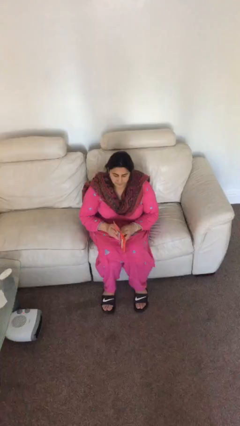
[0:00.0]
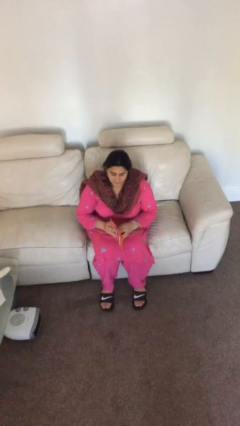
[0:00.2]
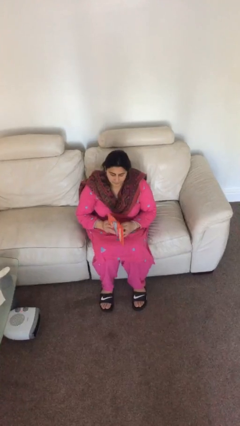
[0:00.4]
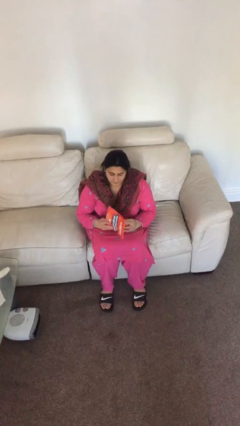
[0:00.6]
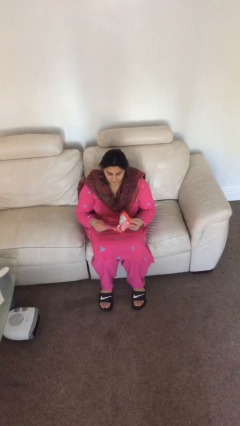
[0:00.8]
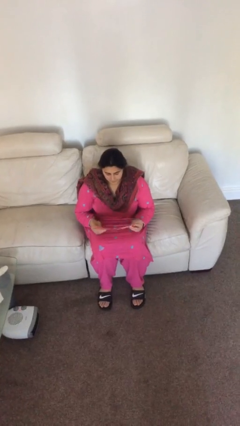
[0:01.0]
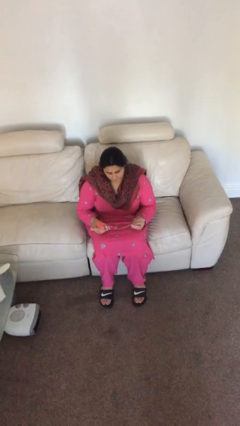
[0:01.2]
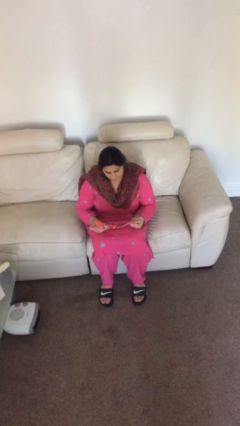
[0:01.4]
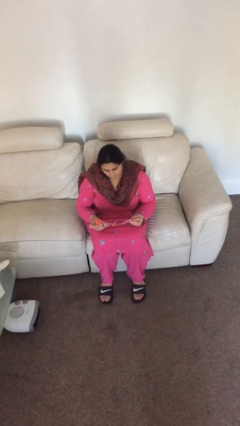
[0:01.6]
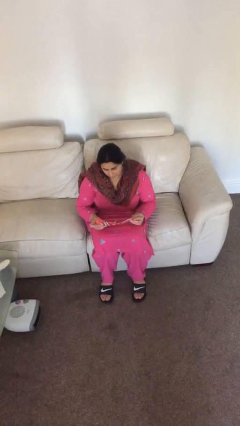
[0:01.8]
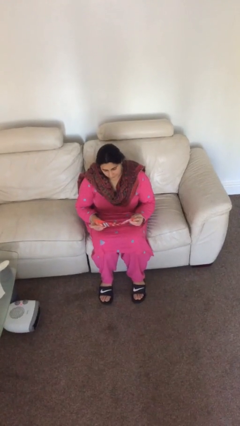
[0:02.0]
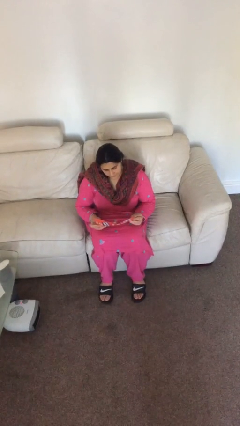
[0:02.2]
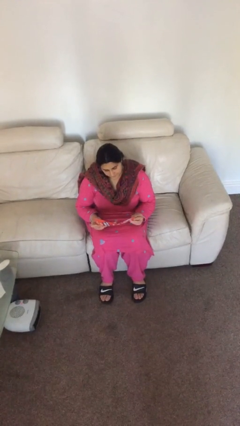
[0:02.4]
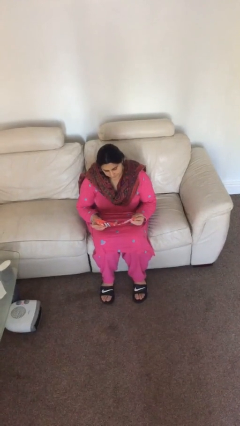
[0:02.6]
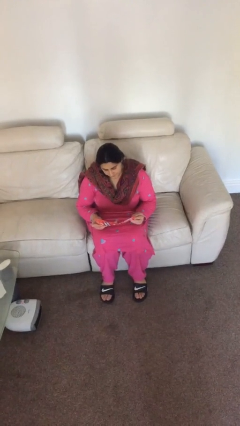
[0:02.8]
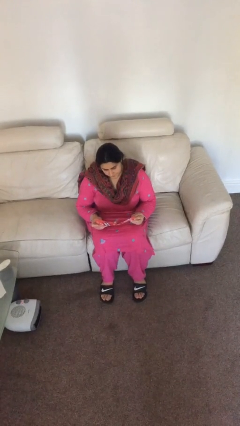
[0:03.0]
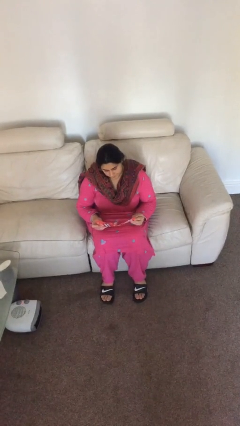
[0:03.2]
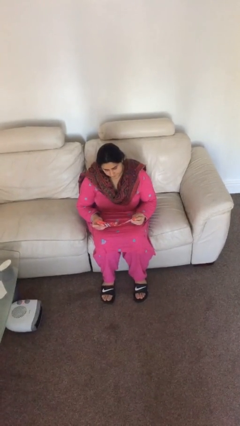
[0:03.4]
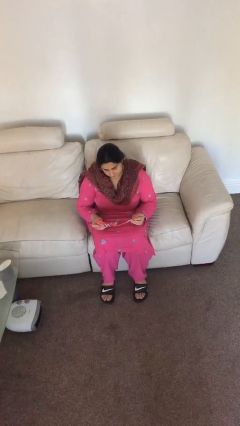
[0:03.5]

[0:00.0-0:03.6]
person reads document

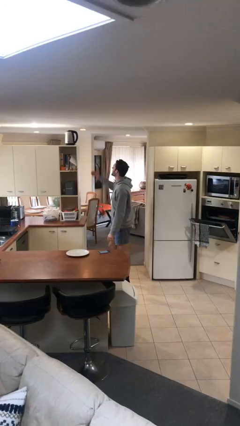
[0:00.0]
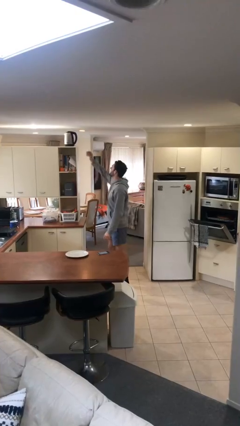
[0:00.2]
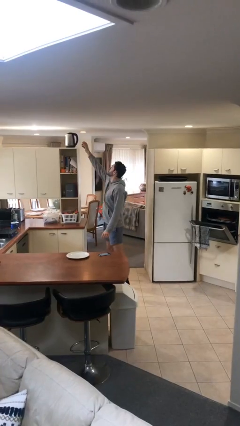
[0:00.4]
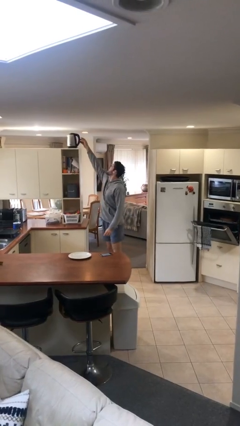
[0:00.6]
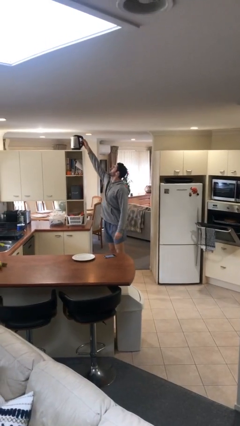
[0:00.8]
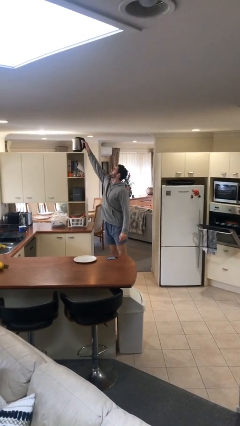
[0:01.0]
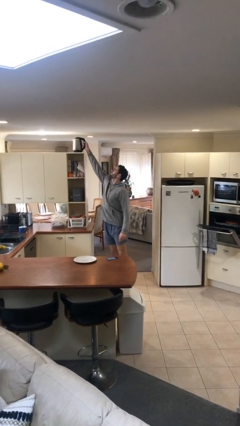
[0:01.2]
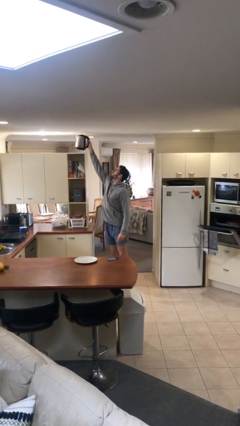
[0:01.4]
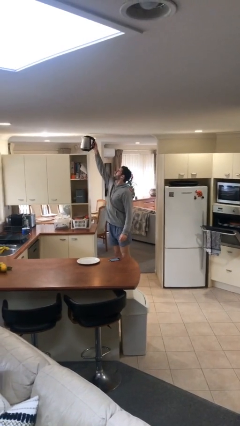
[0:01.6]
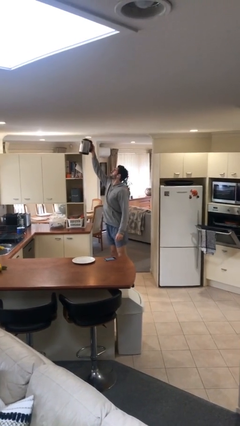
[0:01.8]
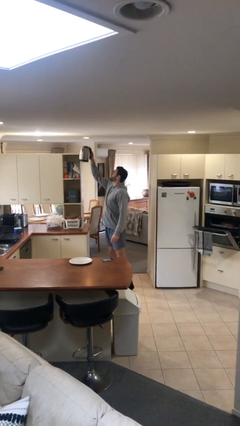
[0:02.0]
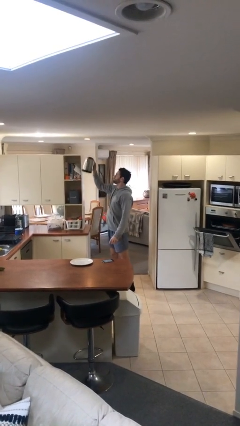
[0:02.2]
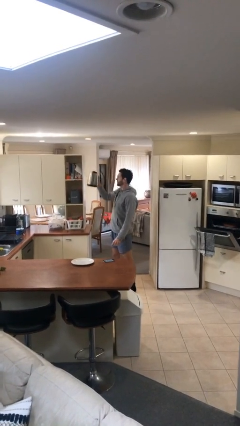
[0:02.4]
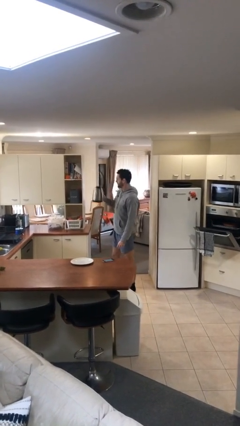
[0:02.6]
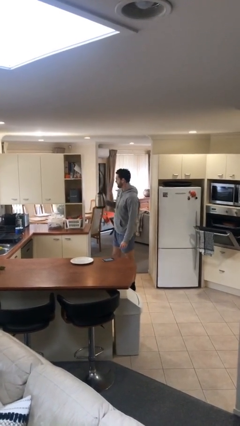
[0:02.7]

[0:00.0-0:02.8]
person picks up object from shelf

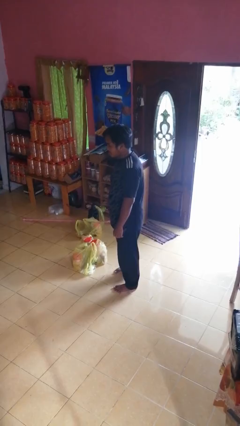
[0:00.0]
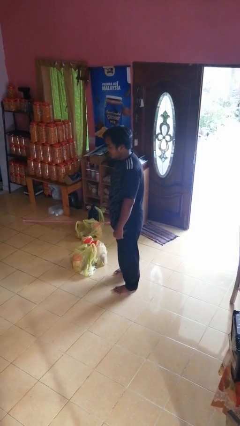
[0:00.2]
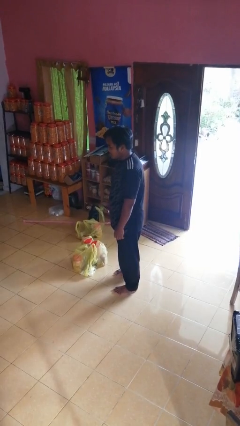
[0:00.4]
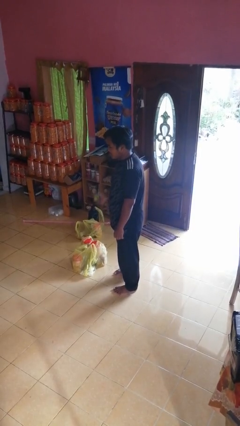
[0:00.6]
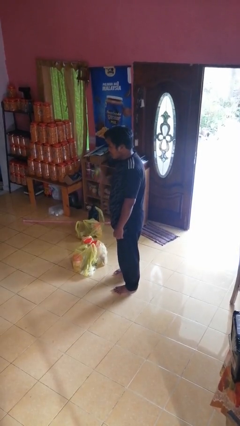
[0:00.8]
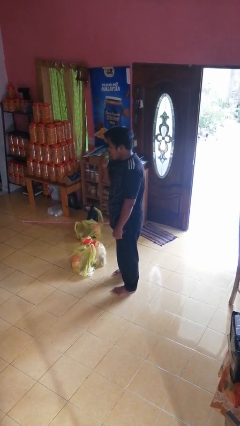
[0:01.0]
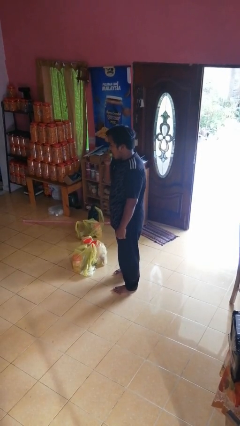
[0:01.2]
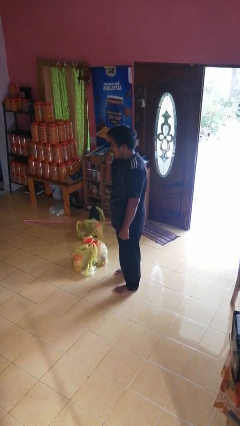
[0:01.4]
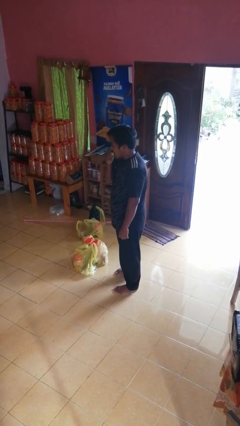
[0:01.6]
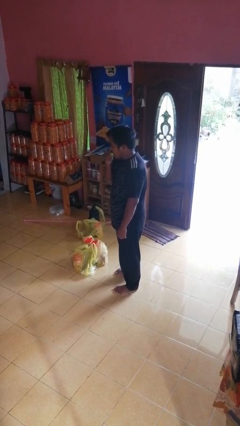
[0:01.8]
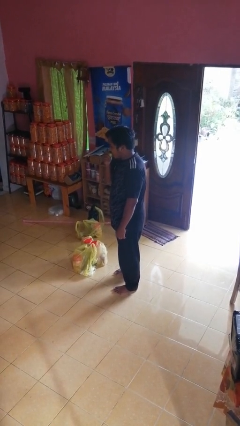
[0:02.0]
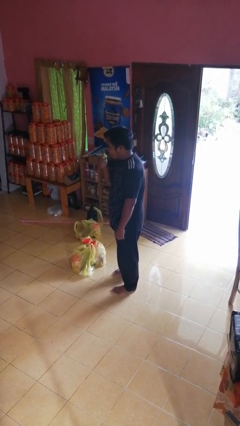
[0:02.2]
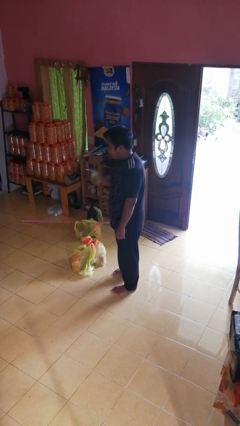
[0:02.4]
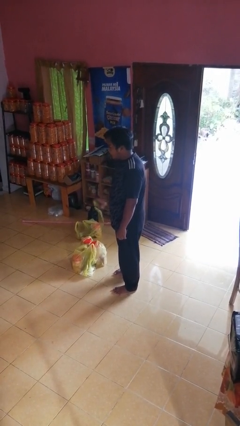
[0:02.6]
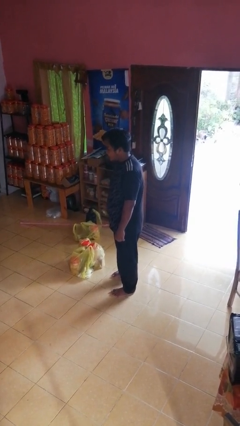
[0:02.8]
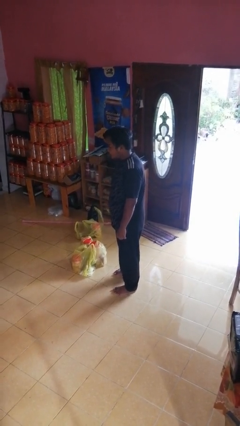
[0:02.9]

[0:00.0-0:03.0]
person eats apple

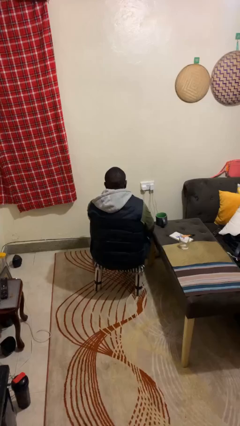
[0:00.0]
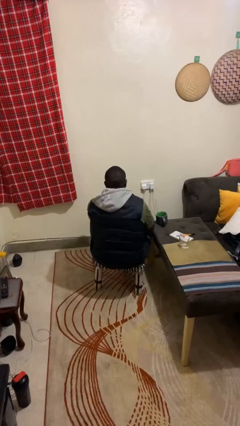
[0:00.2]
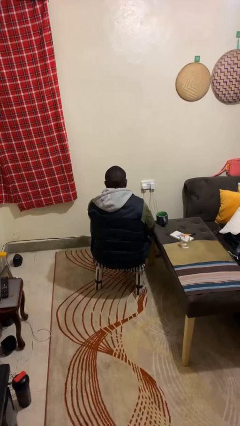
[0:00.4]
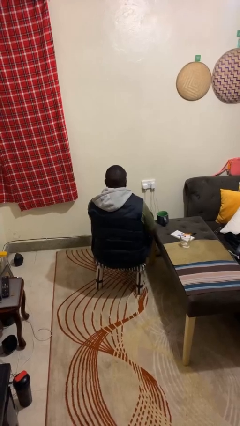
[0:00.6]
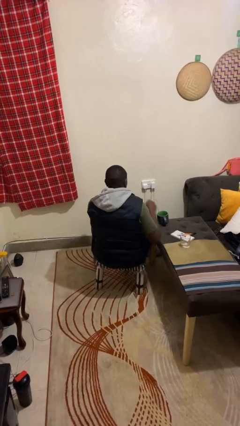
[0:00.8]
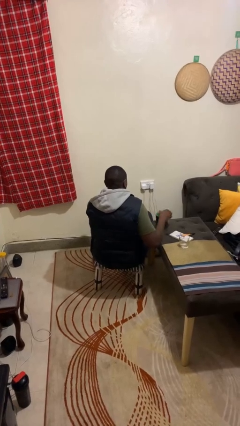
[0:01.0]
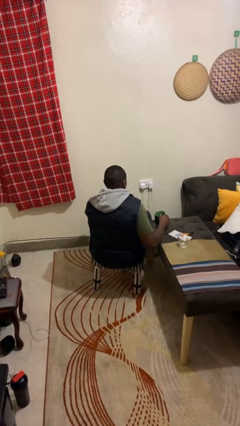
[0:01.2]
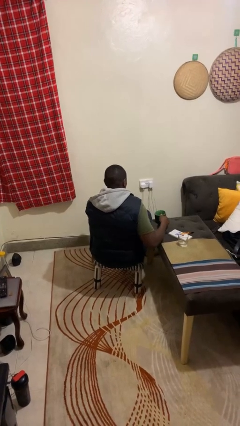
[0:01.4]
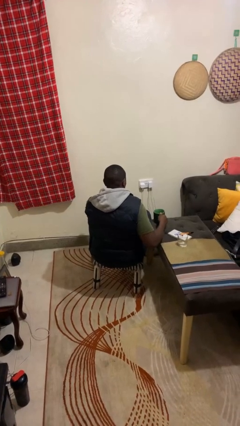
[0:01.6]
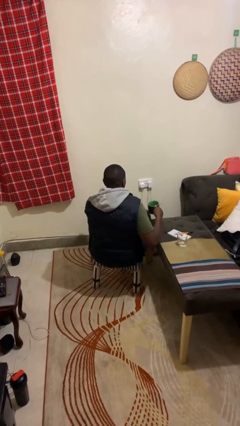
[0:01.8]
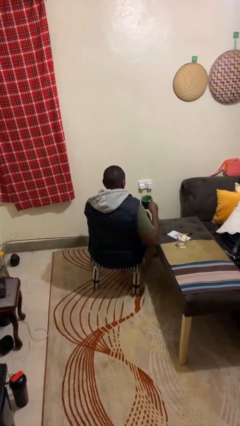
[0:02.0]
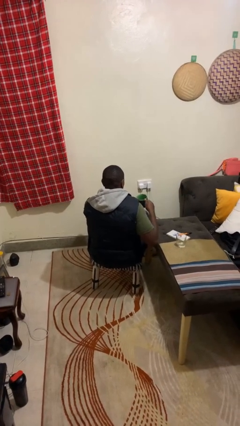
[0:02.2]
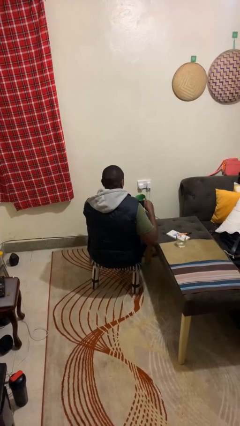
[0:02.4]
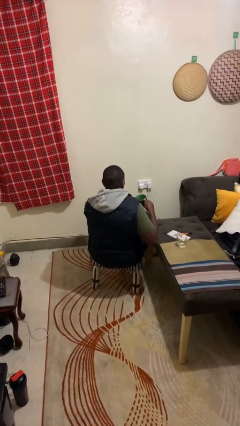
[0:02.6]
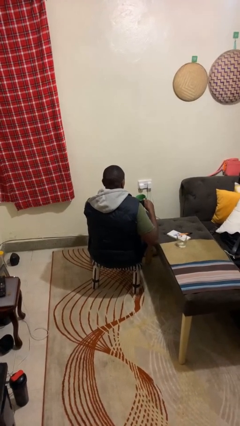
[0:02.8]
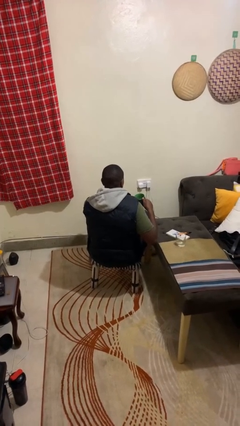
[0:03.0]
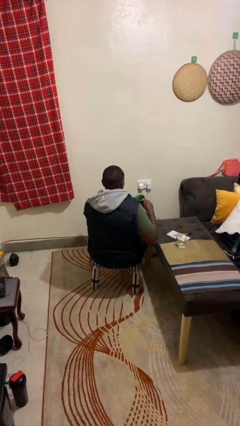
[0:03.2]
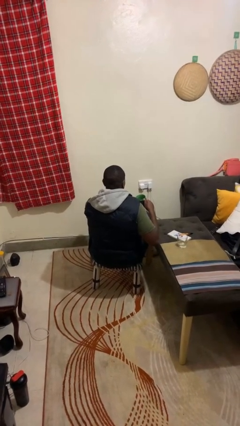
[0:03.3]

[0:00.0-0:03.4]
person picks up object from table

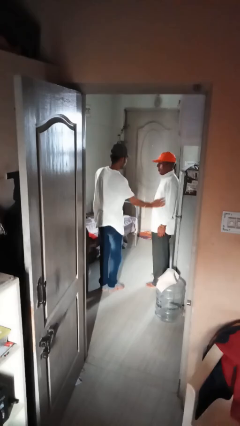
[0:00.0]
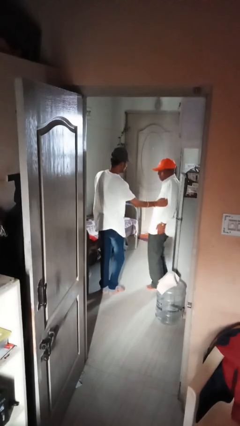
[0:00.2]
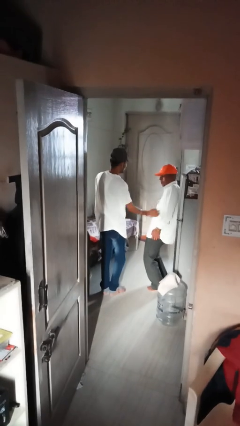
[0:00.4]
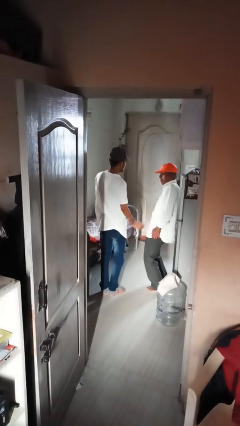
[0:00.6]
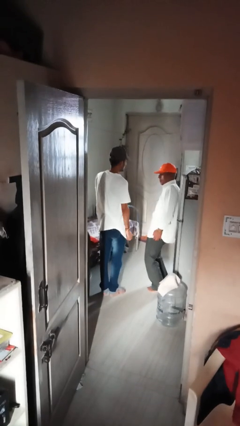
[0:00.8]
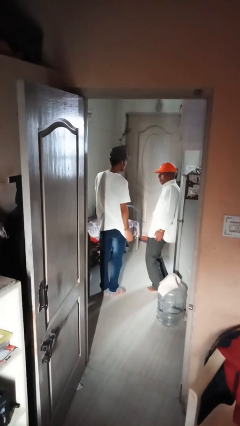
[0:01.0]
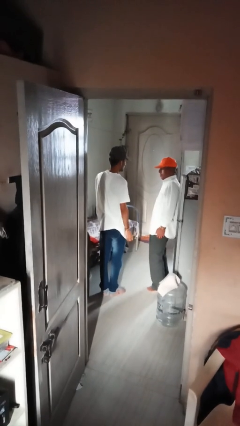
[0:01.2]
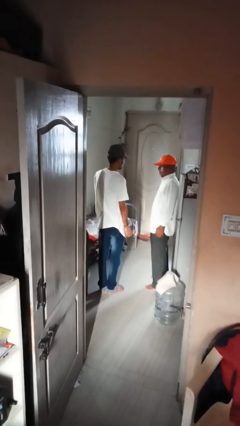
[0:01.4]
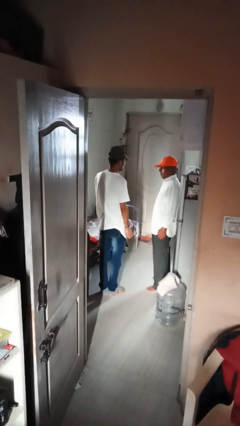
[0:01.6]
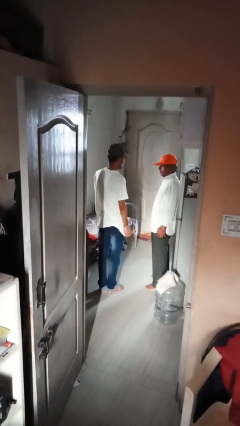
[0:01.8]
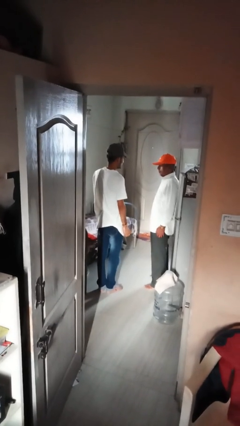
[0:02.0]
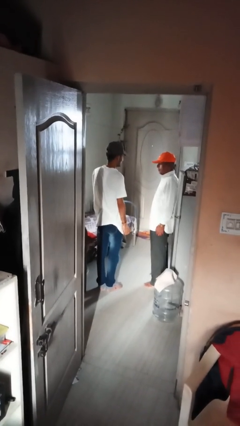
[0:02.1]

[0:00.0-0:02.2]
person tickles person

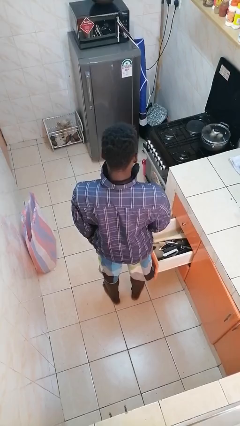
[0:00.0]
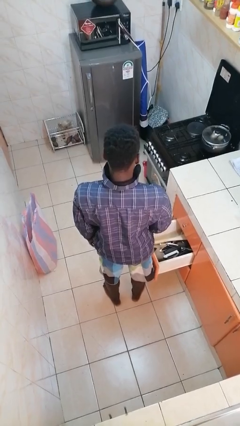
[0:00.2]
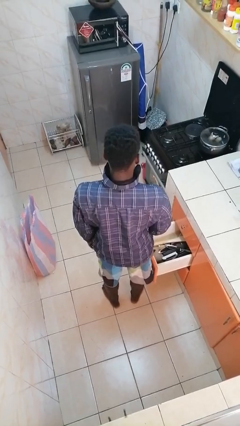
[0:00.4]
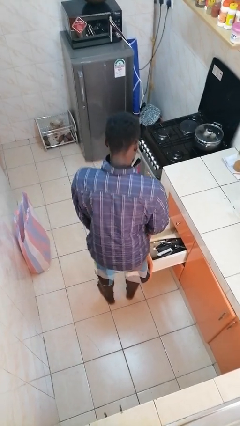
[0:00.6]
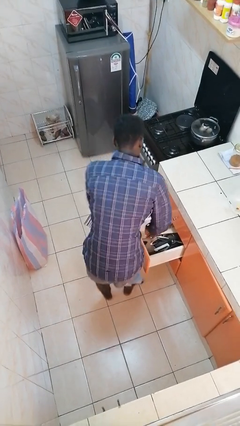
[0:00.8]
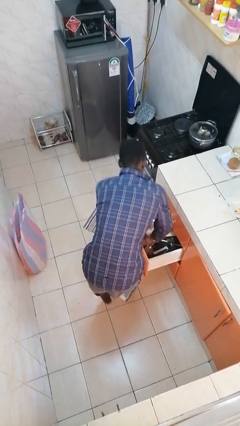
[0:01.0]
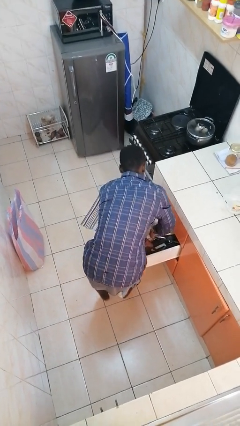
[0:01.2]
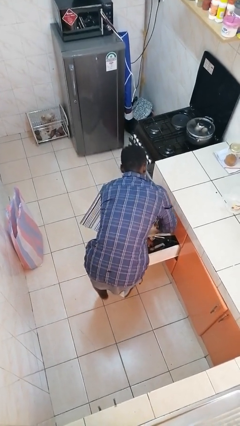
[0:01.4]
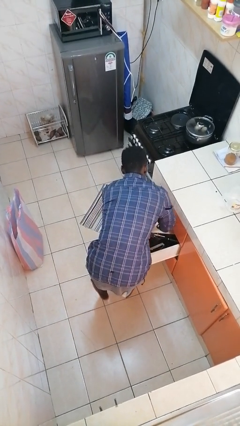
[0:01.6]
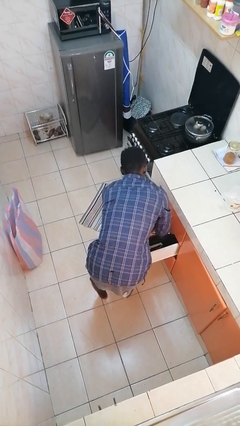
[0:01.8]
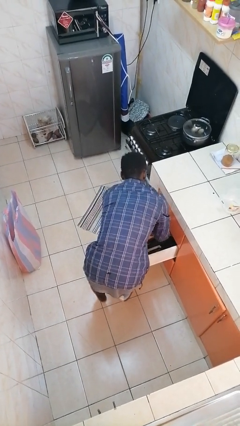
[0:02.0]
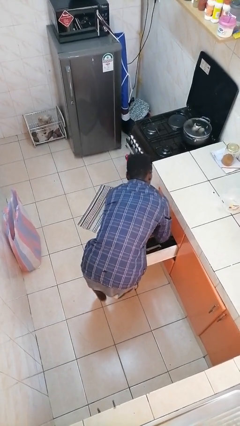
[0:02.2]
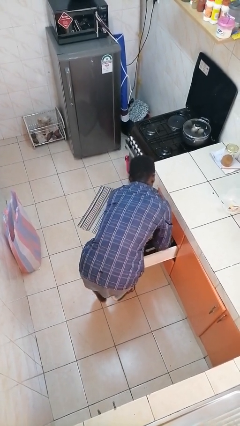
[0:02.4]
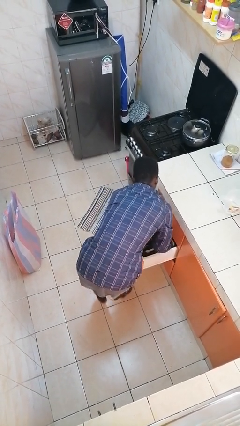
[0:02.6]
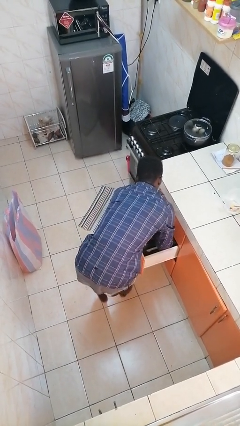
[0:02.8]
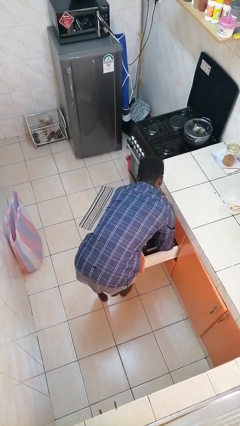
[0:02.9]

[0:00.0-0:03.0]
person searches in kitchen drawer
